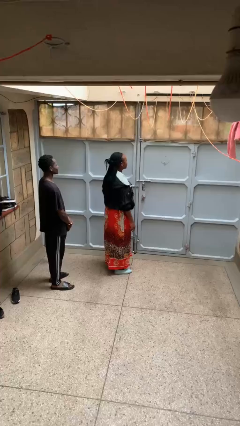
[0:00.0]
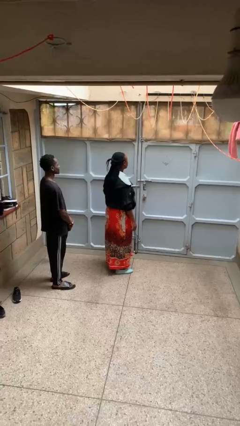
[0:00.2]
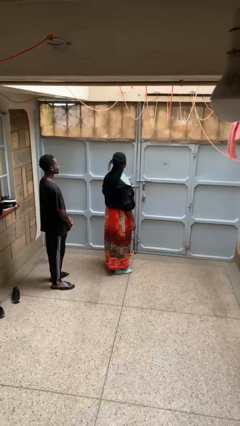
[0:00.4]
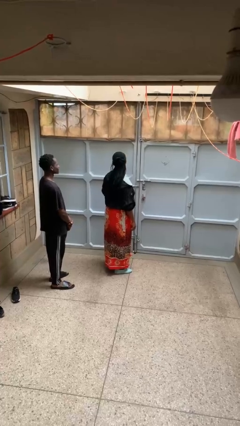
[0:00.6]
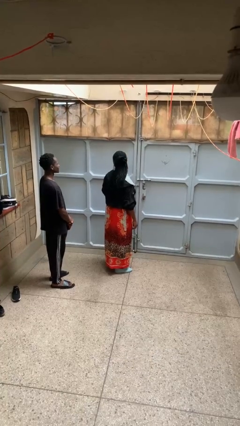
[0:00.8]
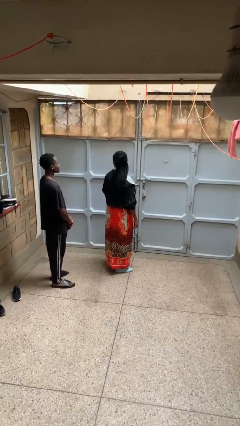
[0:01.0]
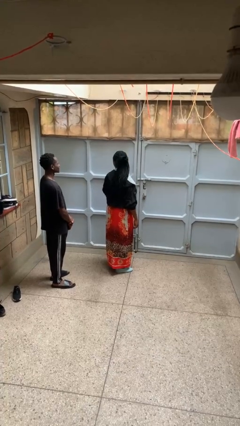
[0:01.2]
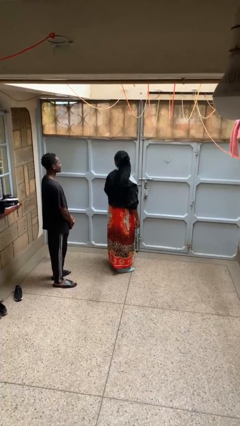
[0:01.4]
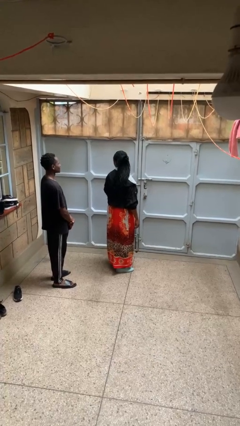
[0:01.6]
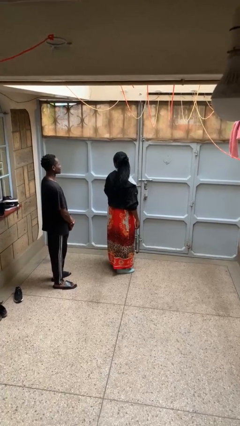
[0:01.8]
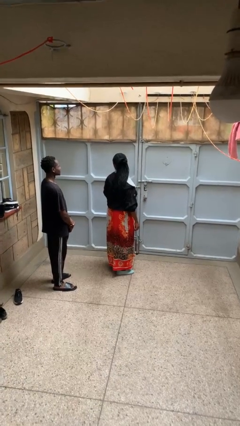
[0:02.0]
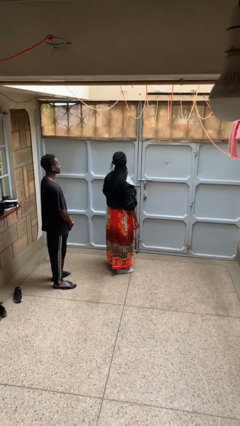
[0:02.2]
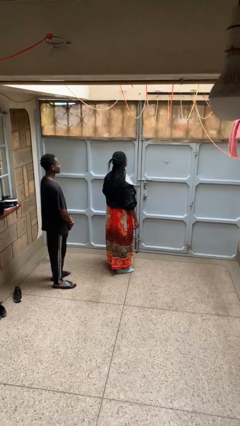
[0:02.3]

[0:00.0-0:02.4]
person looks over shoulder

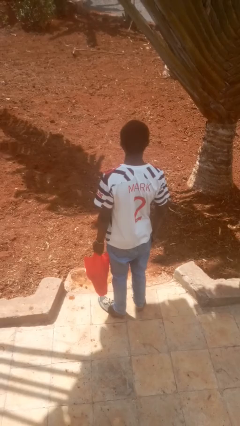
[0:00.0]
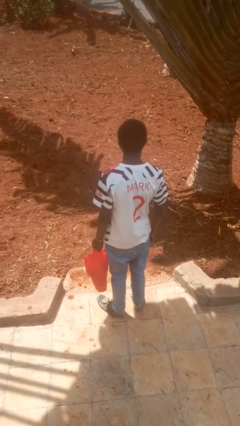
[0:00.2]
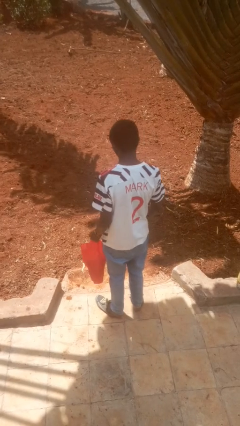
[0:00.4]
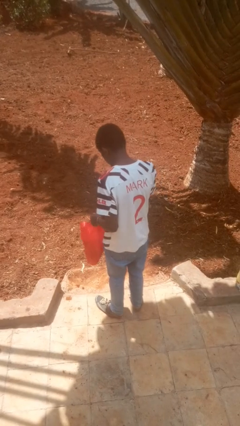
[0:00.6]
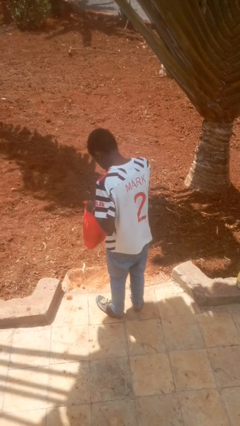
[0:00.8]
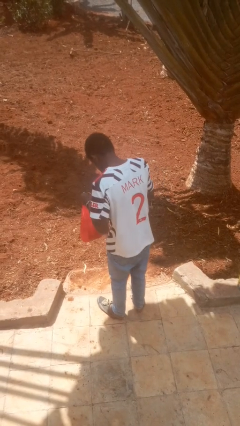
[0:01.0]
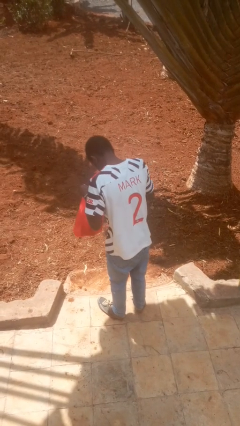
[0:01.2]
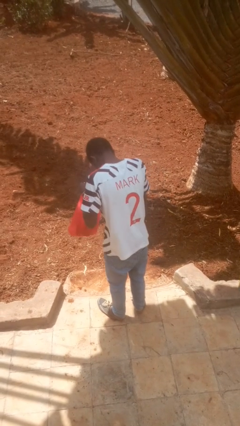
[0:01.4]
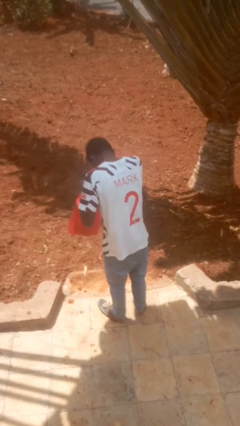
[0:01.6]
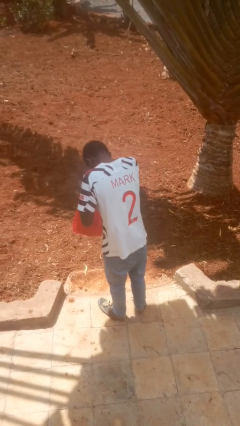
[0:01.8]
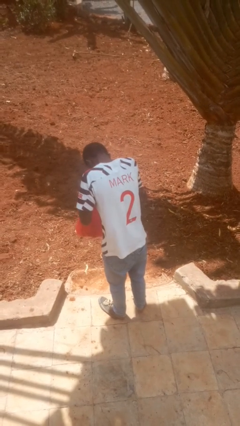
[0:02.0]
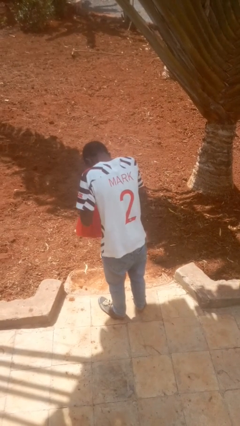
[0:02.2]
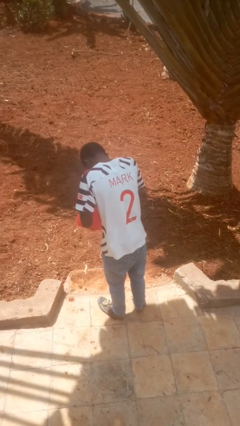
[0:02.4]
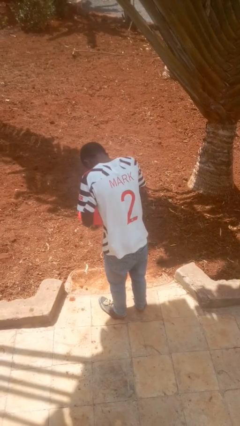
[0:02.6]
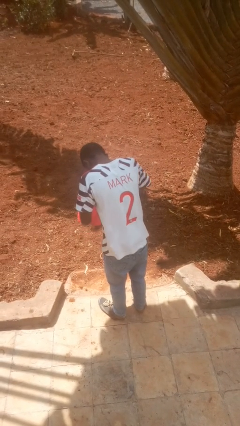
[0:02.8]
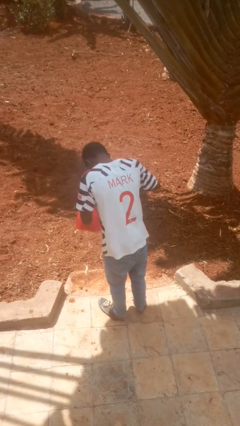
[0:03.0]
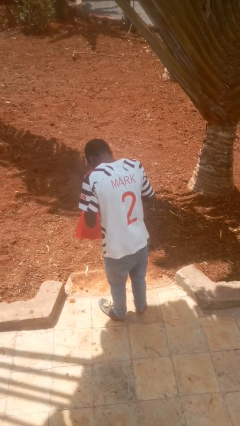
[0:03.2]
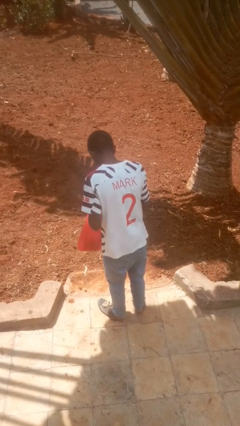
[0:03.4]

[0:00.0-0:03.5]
person searches in bag

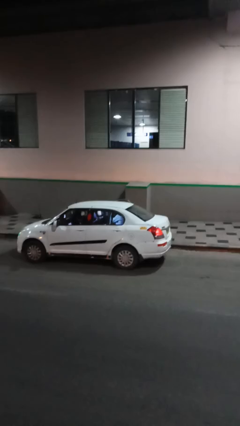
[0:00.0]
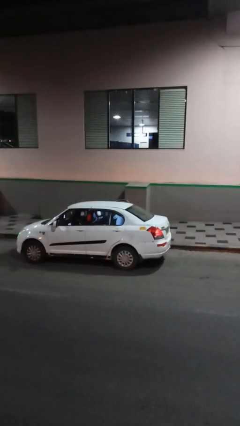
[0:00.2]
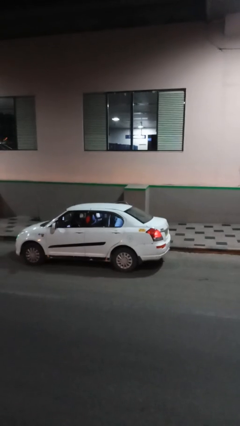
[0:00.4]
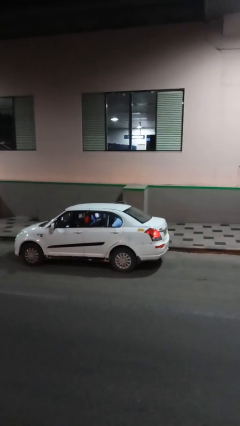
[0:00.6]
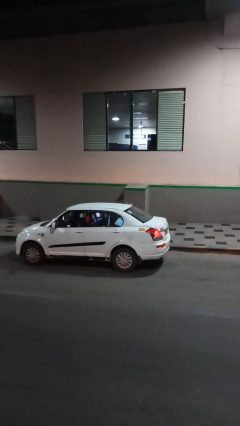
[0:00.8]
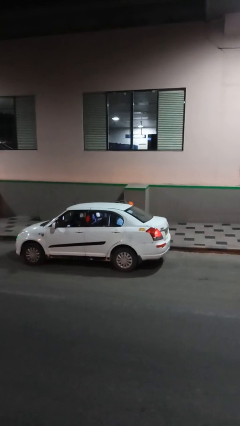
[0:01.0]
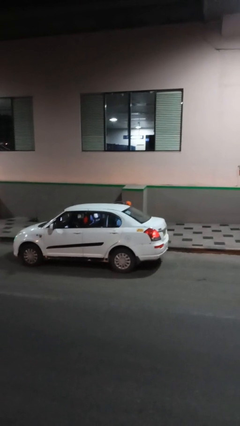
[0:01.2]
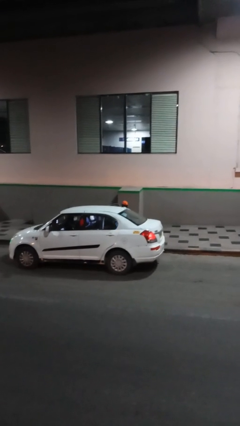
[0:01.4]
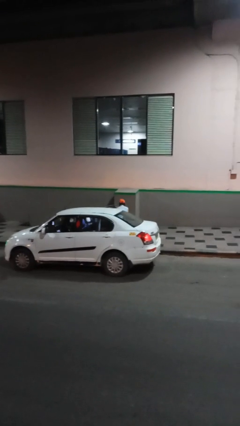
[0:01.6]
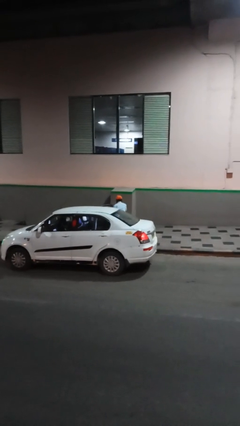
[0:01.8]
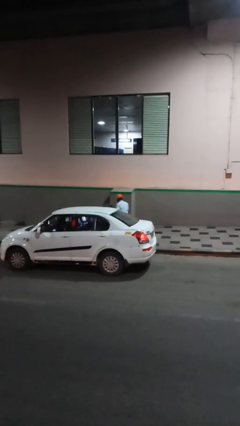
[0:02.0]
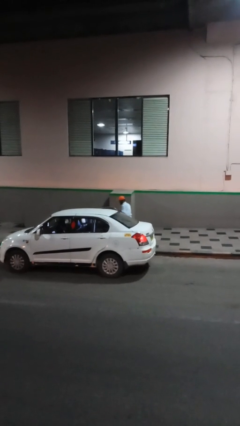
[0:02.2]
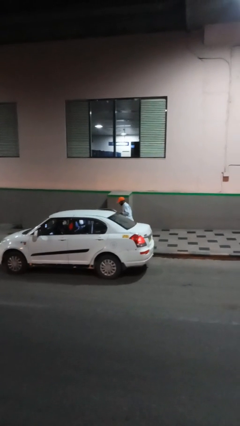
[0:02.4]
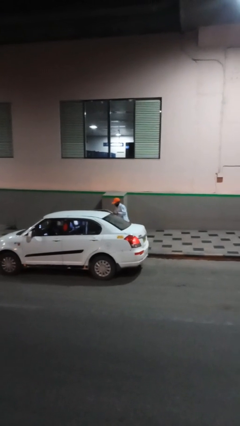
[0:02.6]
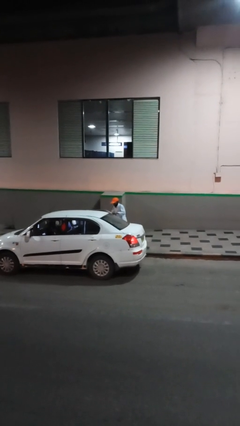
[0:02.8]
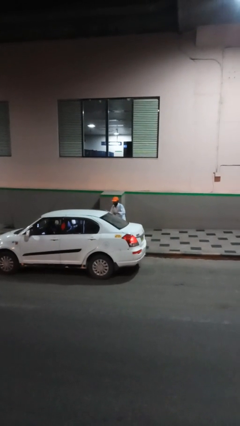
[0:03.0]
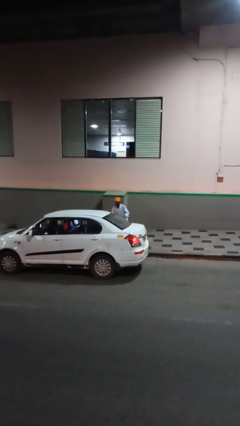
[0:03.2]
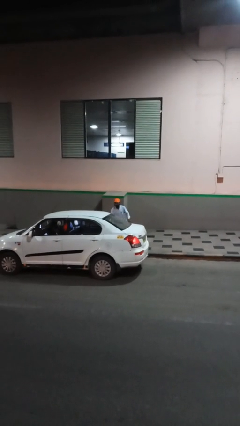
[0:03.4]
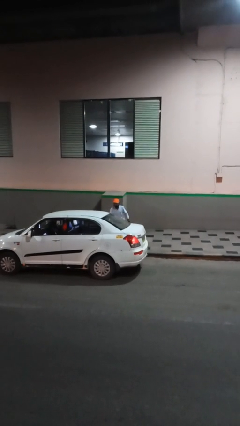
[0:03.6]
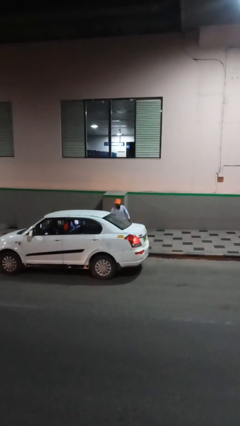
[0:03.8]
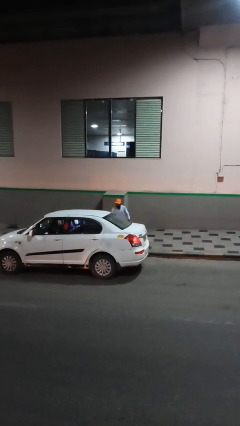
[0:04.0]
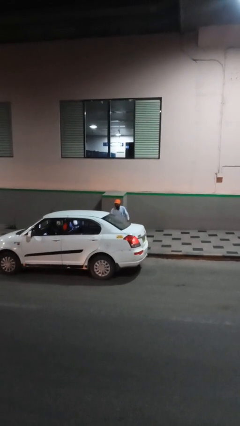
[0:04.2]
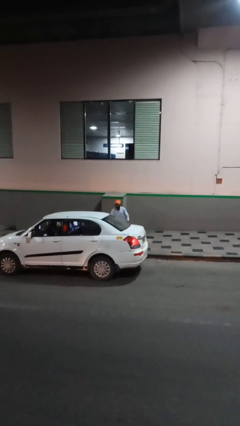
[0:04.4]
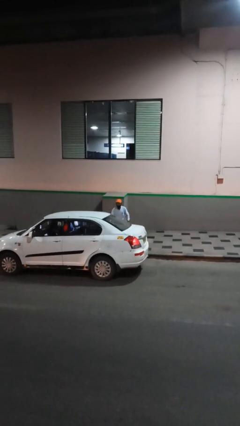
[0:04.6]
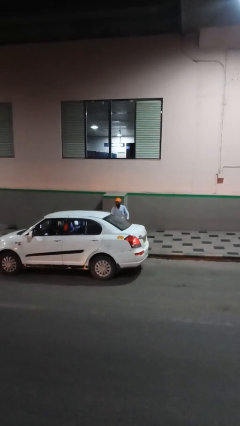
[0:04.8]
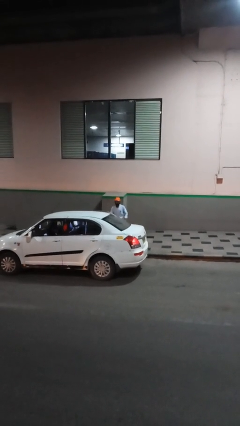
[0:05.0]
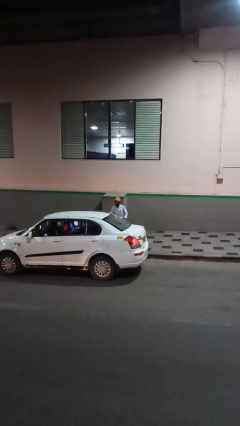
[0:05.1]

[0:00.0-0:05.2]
person exits car

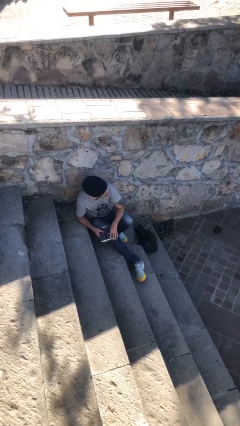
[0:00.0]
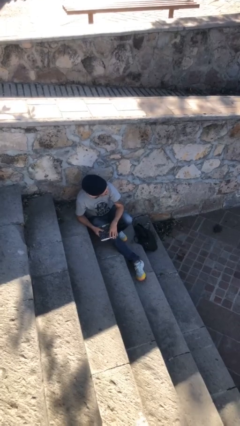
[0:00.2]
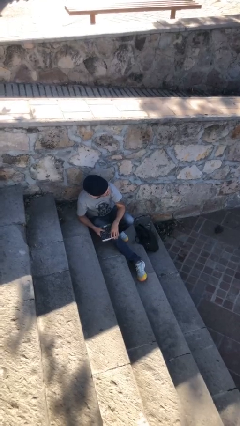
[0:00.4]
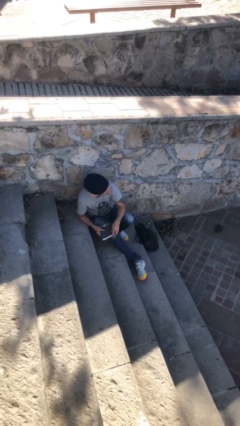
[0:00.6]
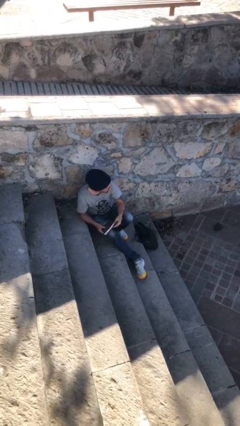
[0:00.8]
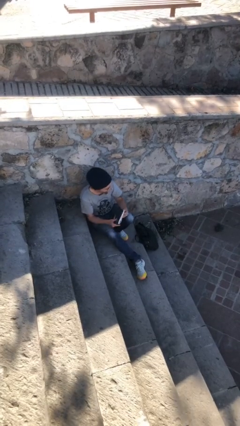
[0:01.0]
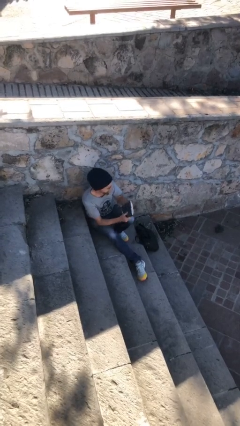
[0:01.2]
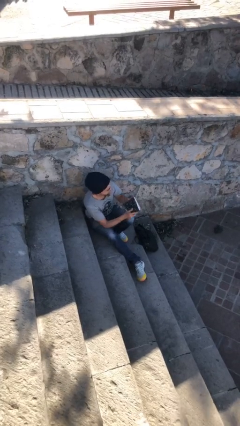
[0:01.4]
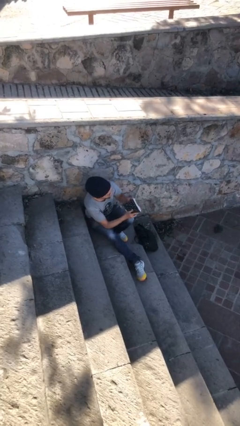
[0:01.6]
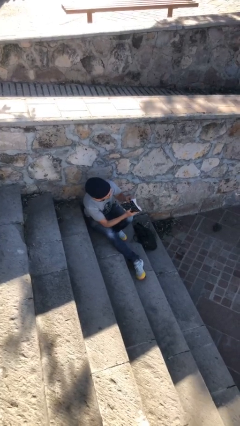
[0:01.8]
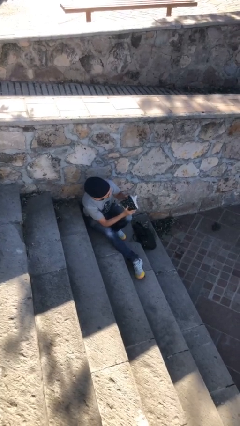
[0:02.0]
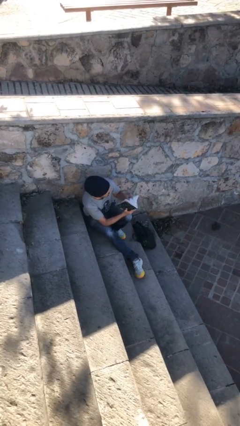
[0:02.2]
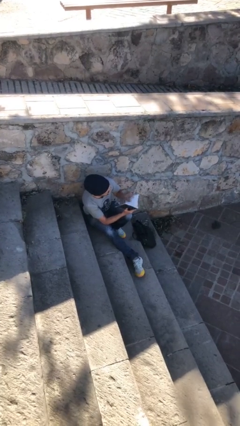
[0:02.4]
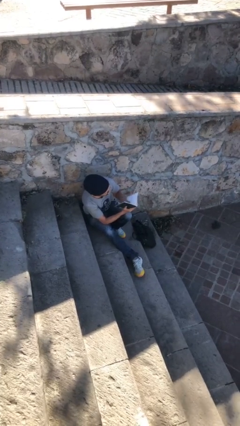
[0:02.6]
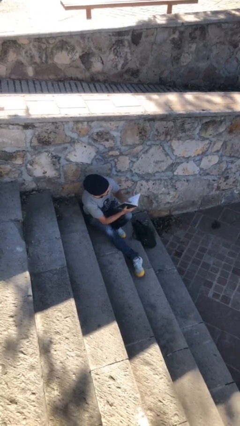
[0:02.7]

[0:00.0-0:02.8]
person reads document

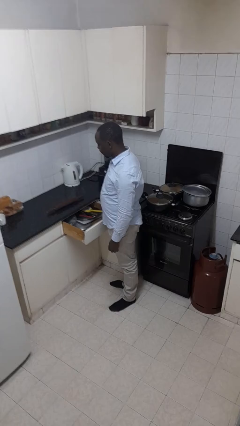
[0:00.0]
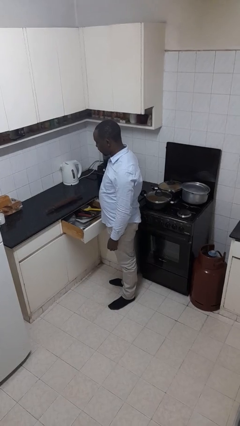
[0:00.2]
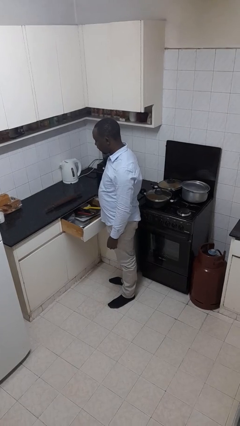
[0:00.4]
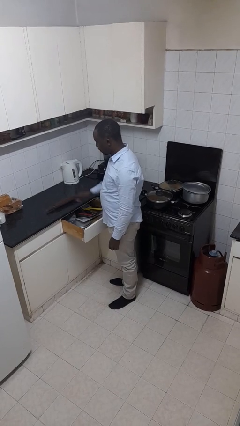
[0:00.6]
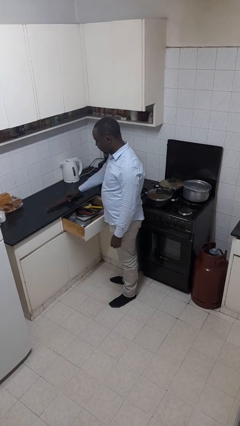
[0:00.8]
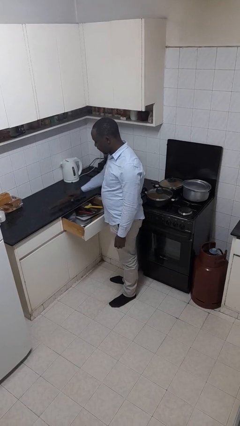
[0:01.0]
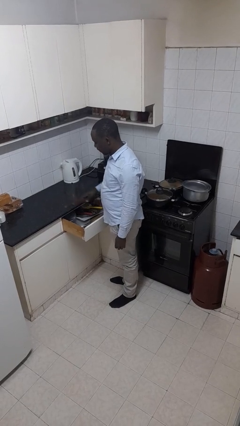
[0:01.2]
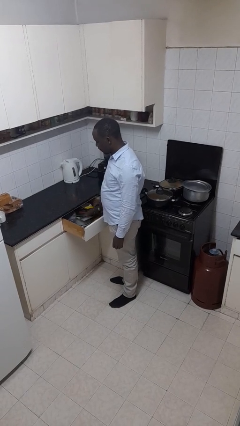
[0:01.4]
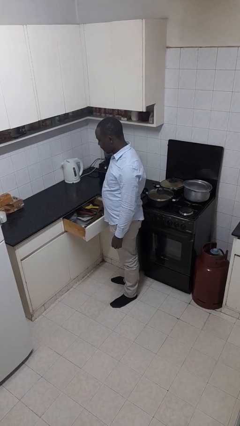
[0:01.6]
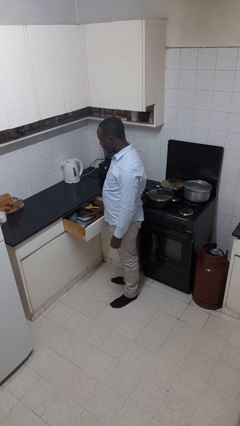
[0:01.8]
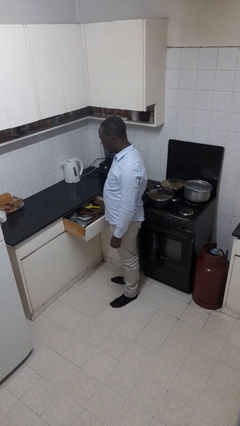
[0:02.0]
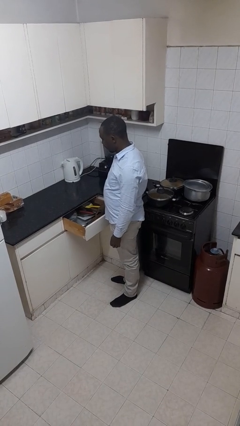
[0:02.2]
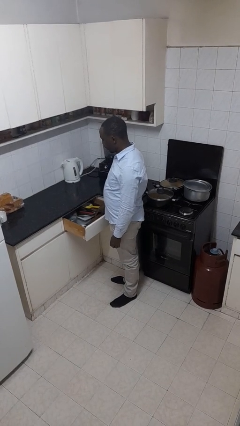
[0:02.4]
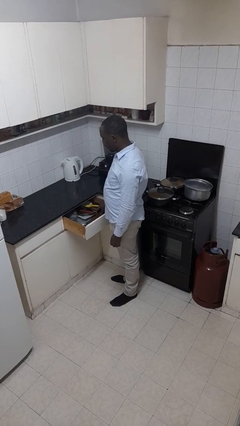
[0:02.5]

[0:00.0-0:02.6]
person puts object into kitchen drawer

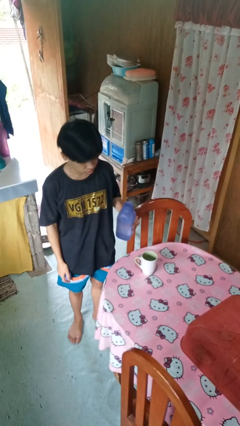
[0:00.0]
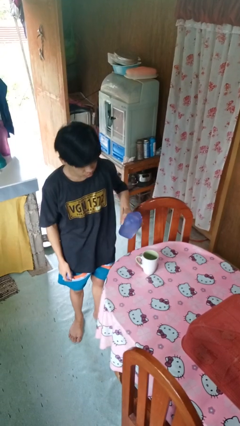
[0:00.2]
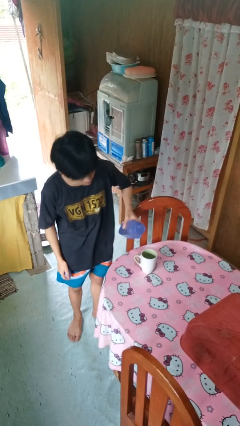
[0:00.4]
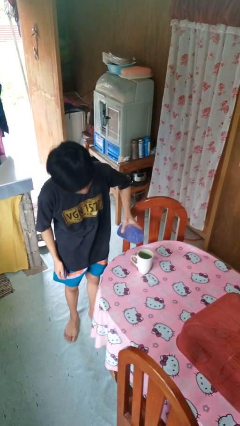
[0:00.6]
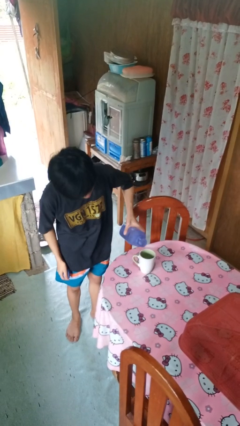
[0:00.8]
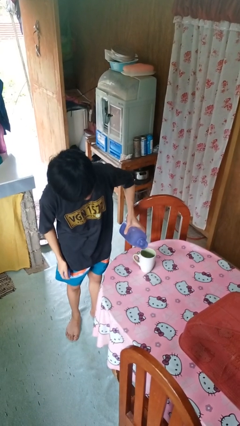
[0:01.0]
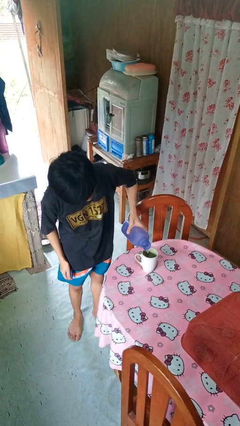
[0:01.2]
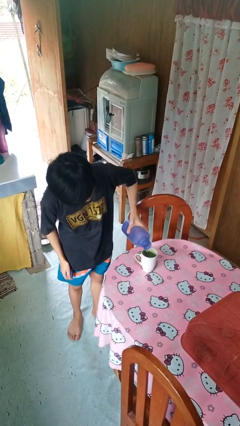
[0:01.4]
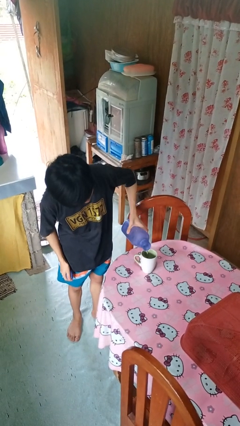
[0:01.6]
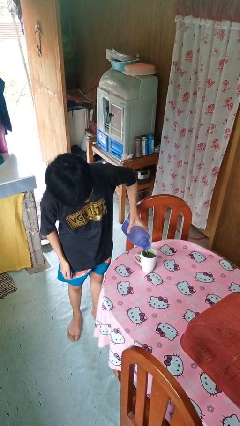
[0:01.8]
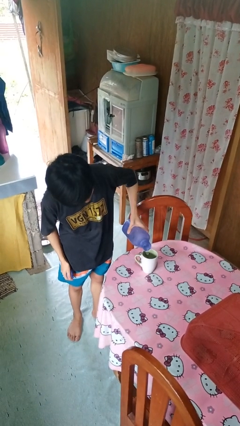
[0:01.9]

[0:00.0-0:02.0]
person pours liquid into cup
